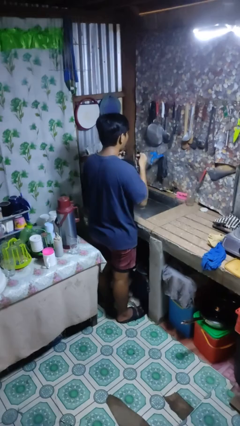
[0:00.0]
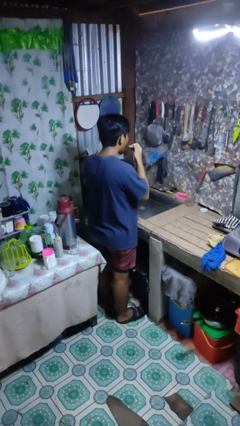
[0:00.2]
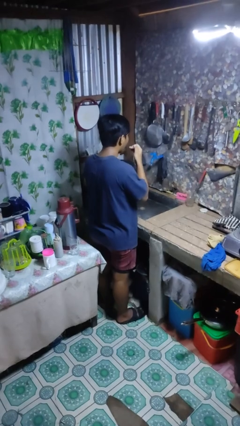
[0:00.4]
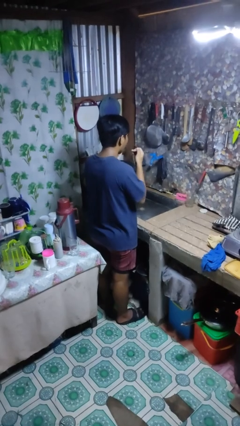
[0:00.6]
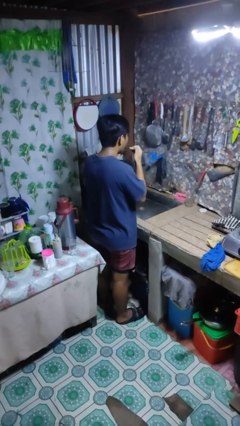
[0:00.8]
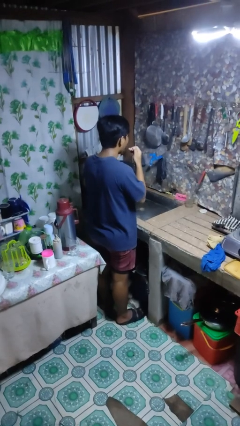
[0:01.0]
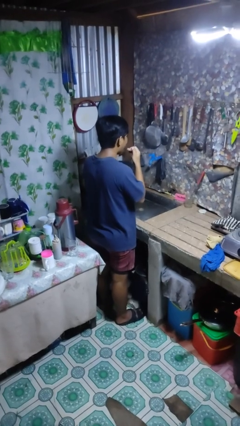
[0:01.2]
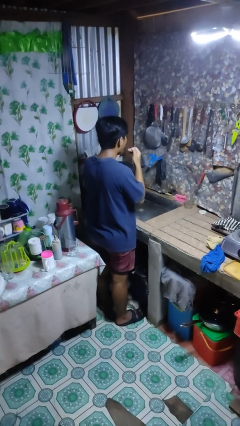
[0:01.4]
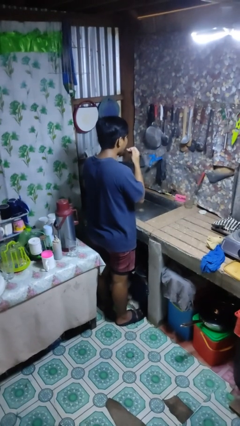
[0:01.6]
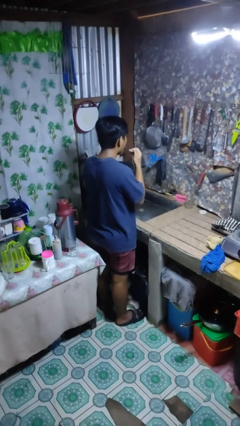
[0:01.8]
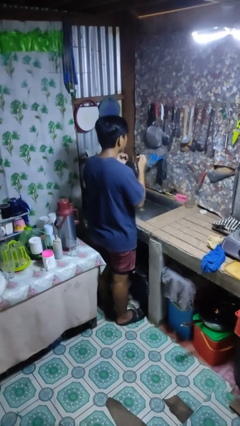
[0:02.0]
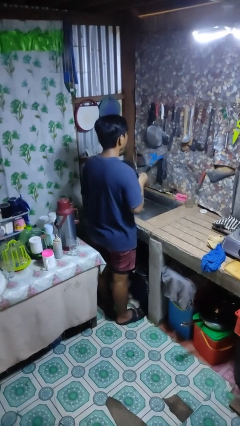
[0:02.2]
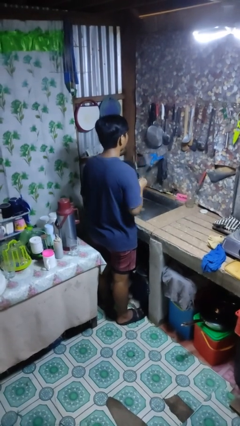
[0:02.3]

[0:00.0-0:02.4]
person flosses

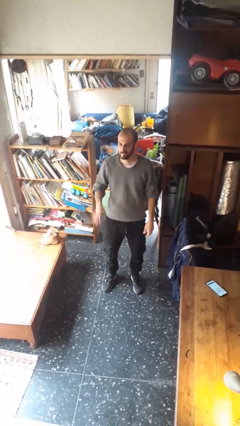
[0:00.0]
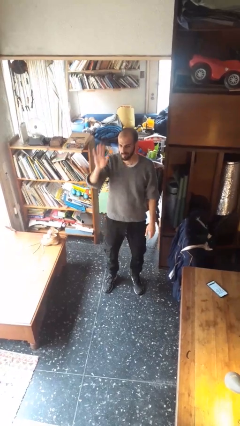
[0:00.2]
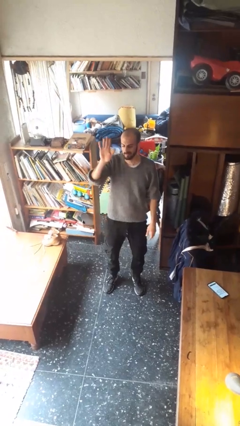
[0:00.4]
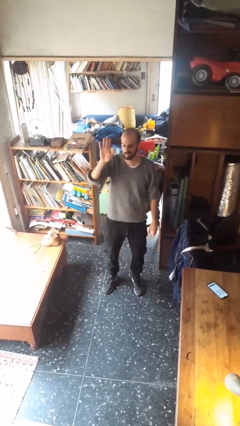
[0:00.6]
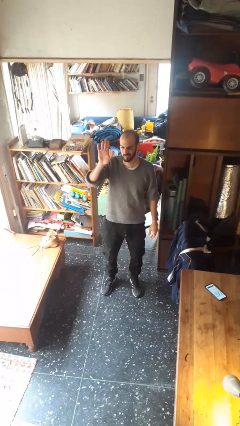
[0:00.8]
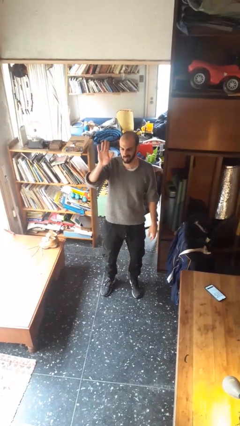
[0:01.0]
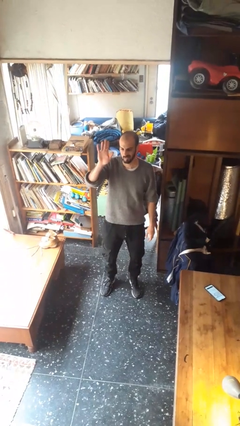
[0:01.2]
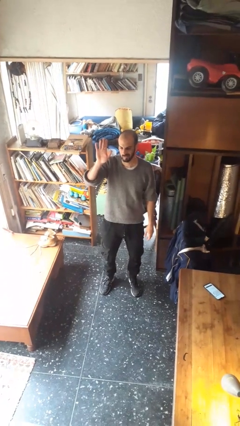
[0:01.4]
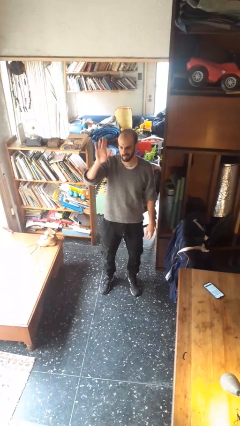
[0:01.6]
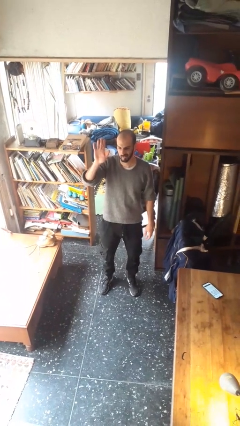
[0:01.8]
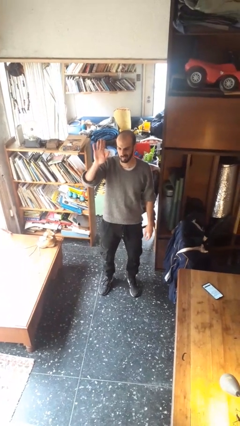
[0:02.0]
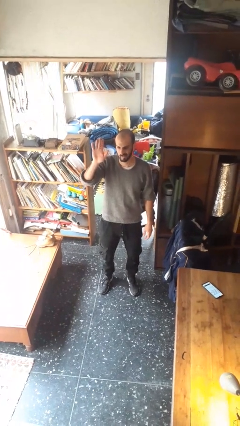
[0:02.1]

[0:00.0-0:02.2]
person gestures raise hand

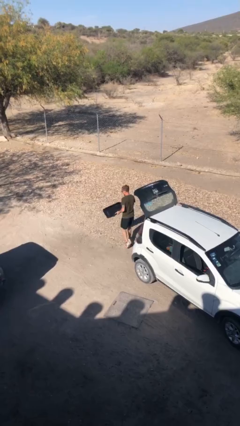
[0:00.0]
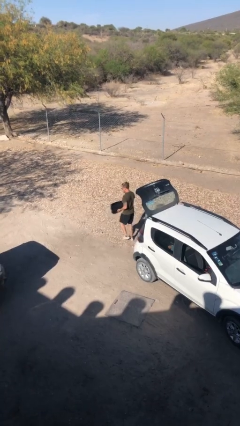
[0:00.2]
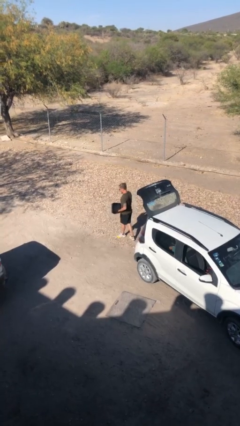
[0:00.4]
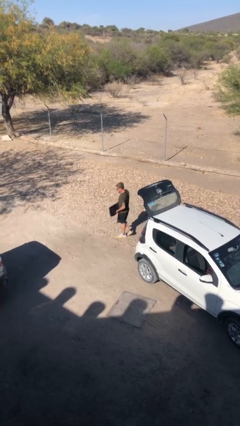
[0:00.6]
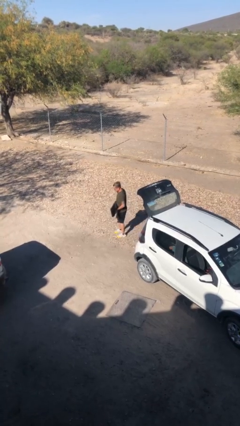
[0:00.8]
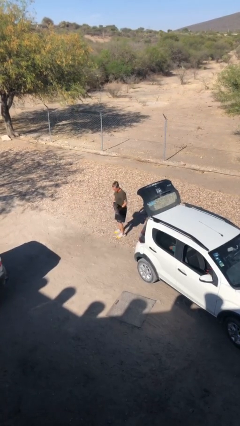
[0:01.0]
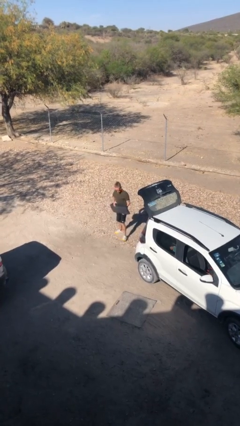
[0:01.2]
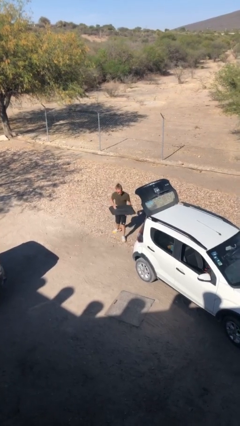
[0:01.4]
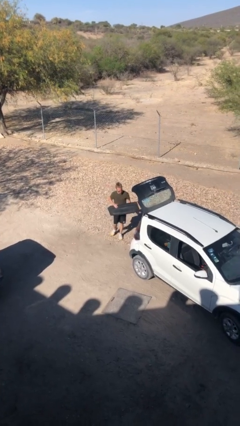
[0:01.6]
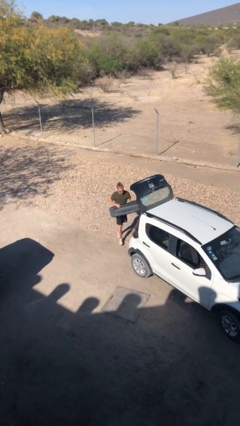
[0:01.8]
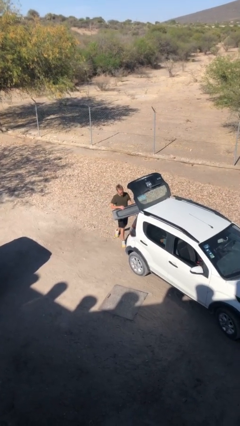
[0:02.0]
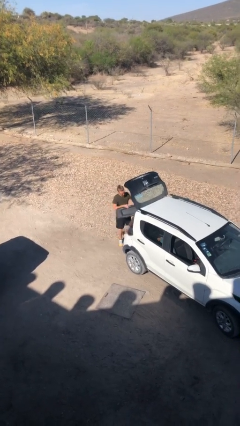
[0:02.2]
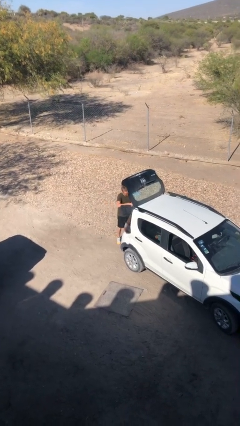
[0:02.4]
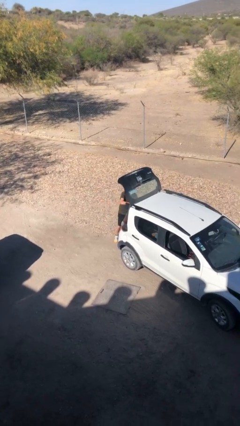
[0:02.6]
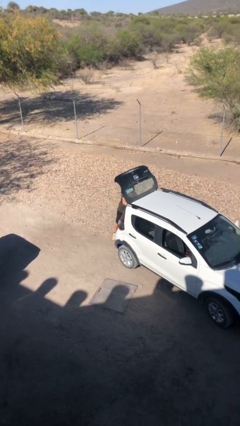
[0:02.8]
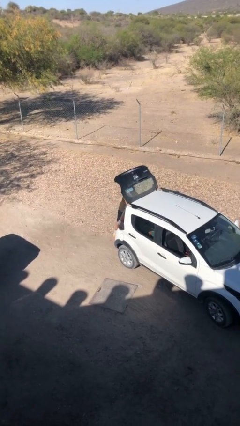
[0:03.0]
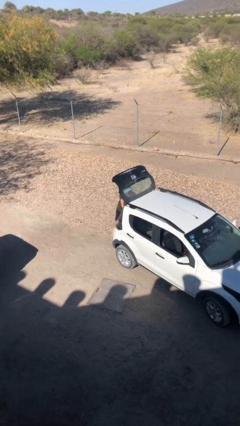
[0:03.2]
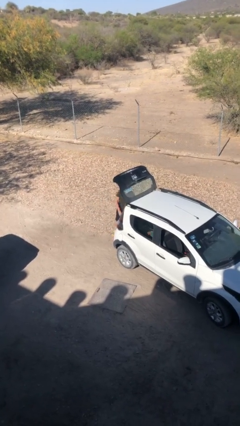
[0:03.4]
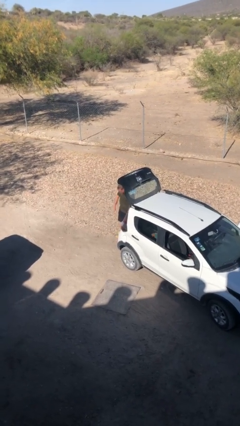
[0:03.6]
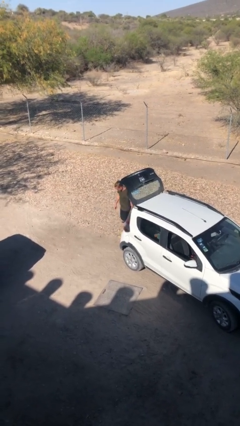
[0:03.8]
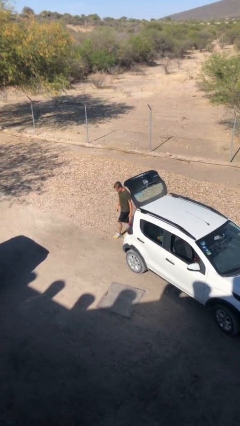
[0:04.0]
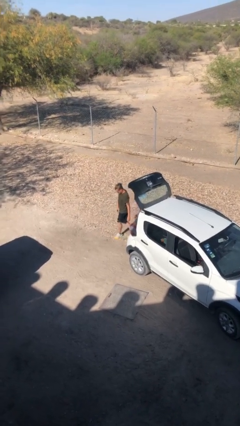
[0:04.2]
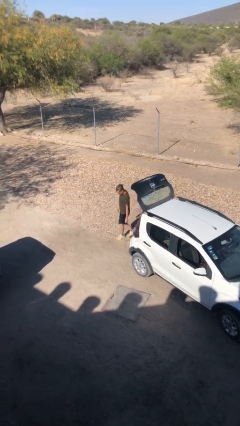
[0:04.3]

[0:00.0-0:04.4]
person loads car

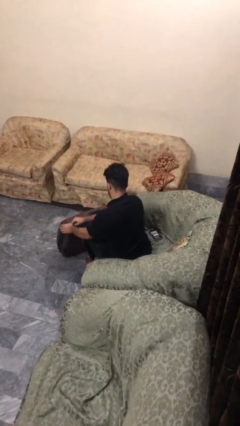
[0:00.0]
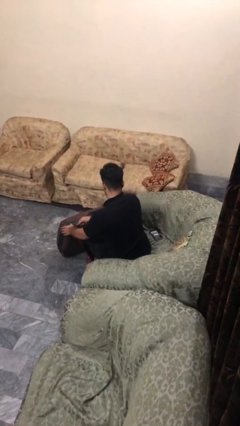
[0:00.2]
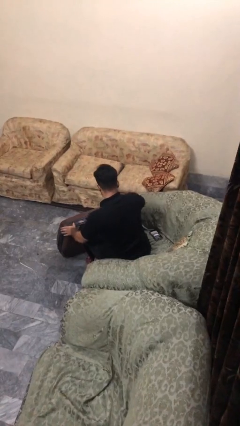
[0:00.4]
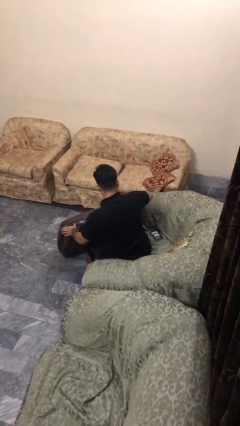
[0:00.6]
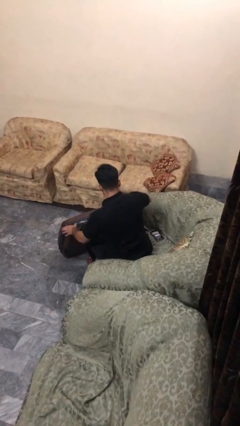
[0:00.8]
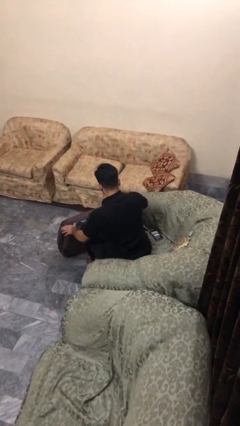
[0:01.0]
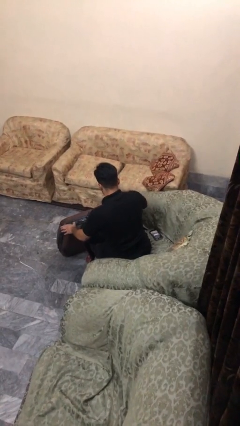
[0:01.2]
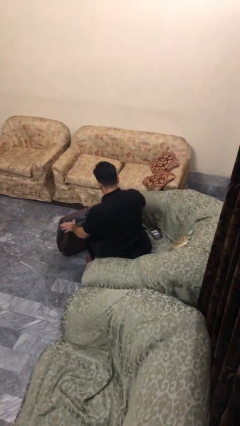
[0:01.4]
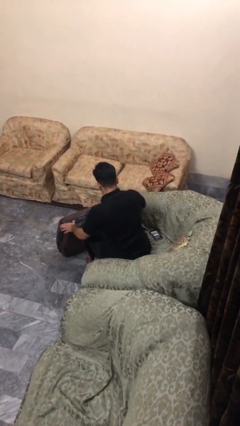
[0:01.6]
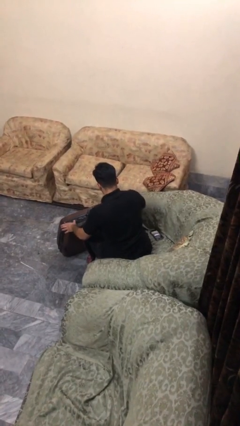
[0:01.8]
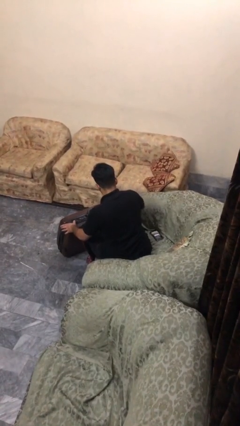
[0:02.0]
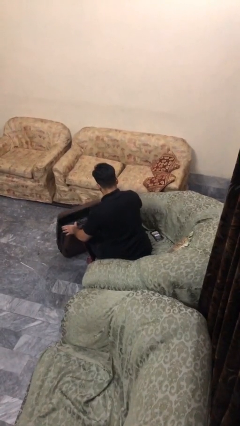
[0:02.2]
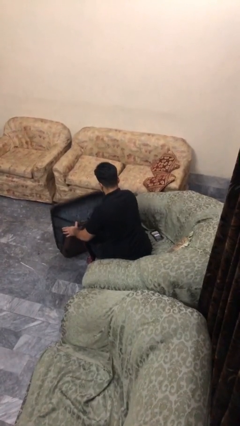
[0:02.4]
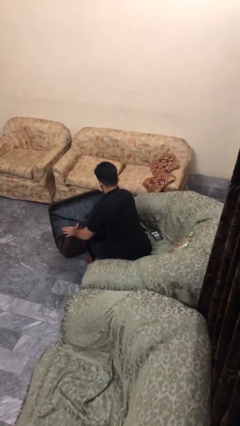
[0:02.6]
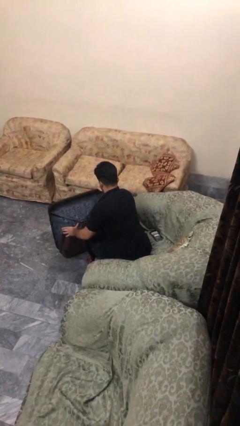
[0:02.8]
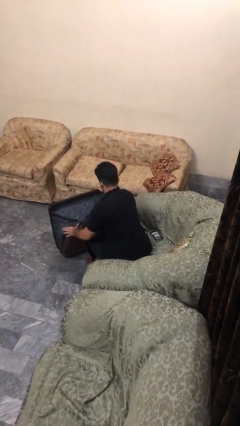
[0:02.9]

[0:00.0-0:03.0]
person opens suitcase

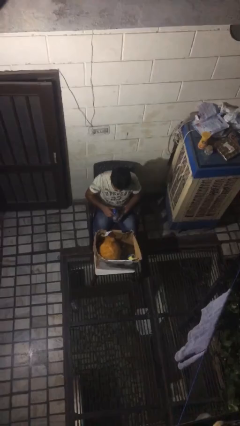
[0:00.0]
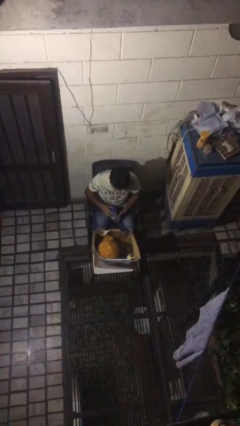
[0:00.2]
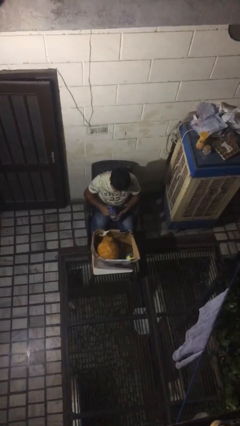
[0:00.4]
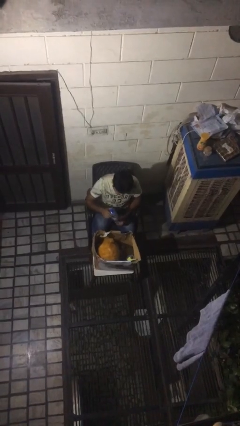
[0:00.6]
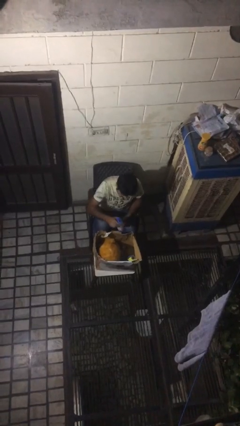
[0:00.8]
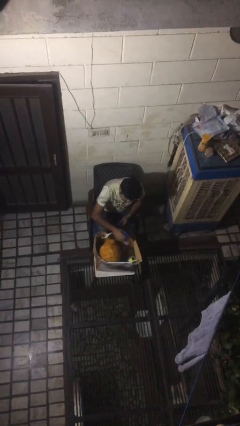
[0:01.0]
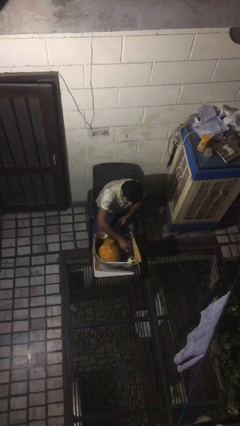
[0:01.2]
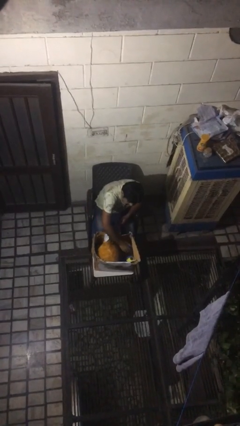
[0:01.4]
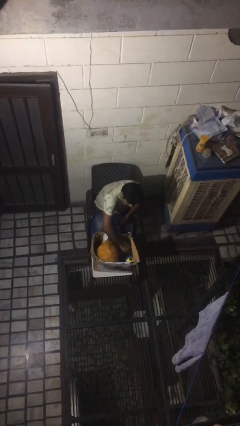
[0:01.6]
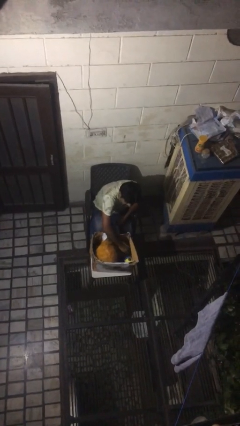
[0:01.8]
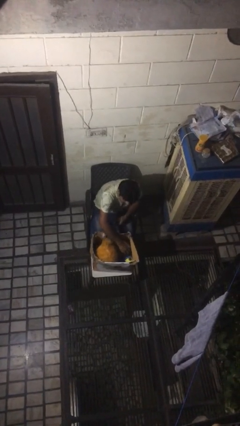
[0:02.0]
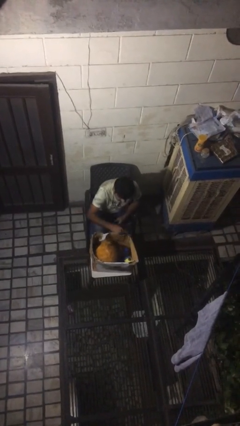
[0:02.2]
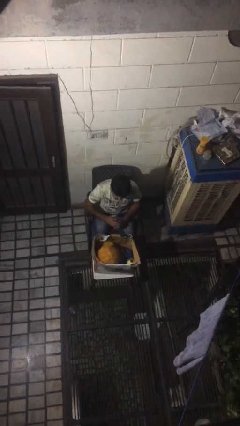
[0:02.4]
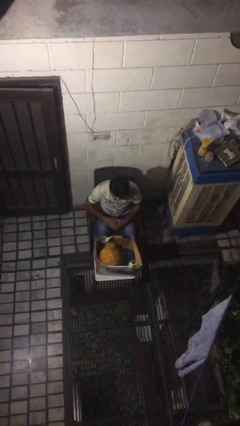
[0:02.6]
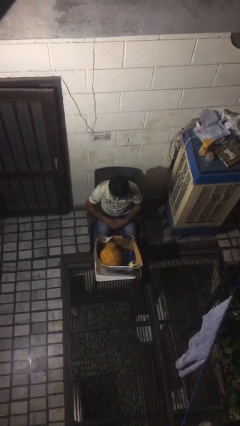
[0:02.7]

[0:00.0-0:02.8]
person puts object into box

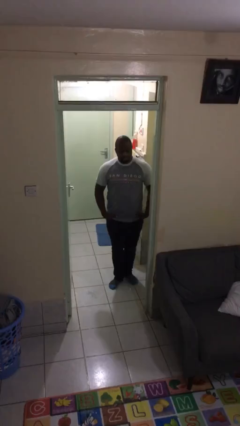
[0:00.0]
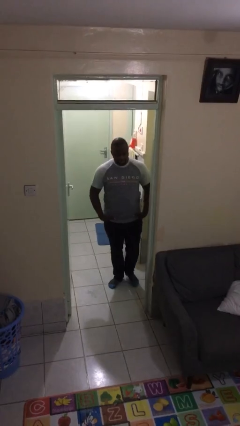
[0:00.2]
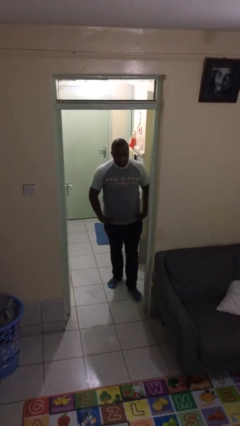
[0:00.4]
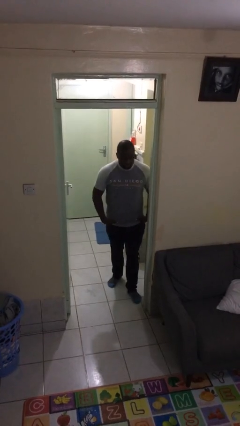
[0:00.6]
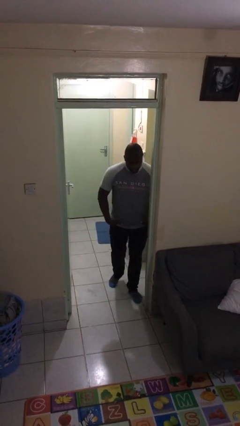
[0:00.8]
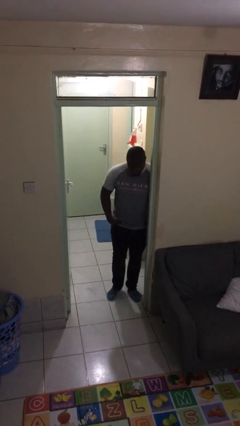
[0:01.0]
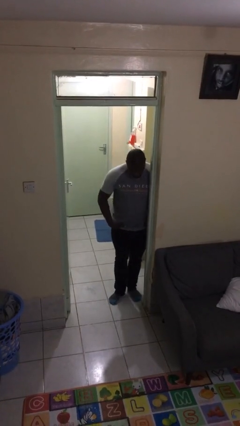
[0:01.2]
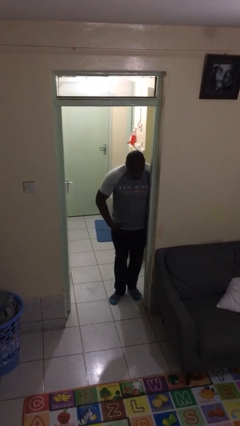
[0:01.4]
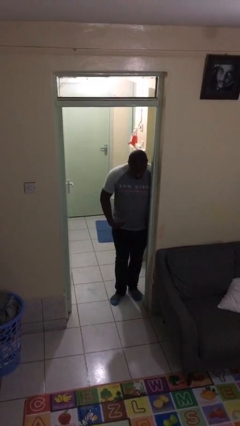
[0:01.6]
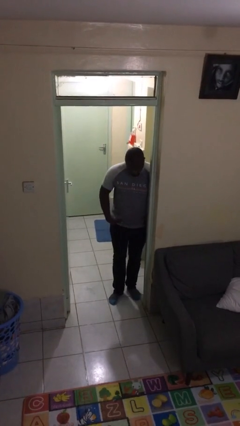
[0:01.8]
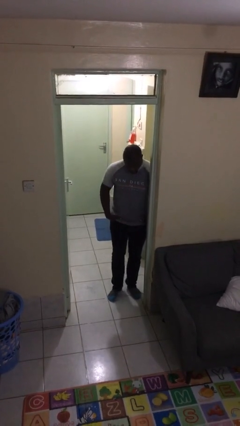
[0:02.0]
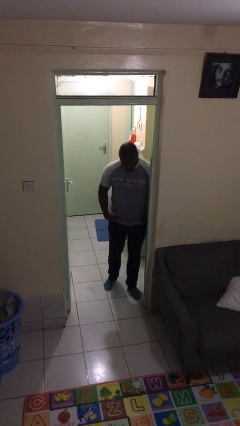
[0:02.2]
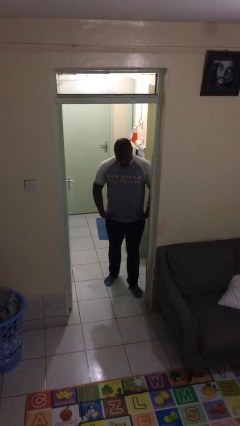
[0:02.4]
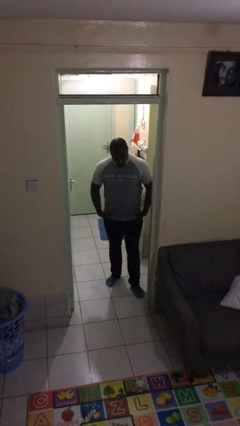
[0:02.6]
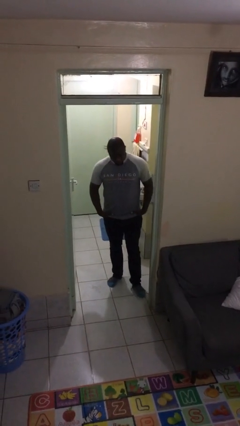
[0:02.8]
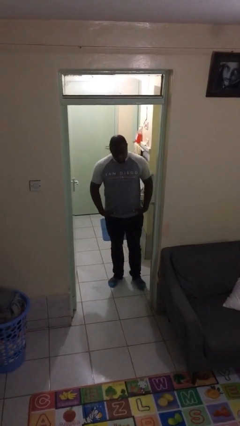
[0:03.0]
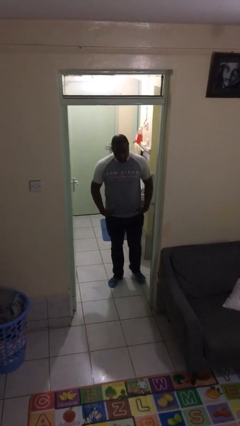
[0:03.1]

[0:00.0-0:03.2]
person bumps into wall
